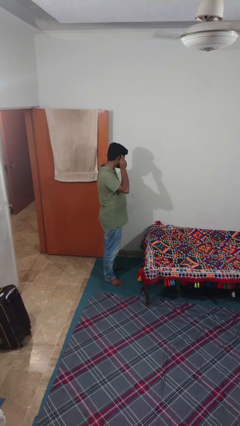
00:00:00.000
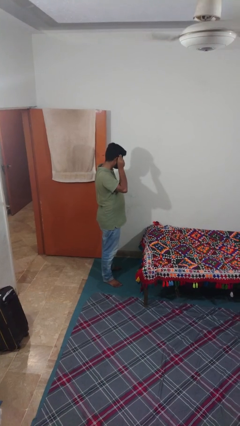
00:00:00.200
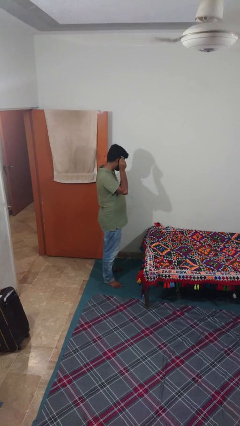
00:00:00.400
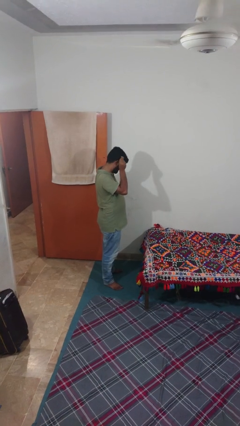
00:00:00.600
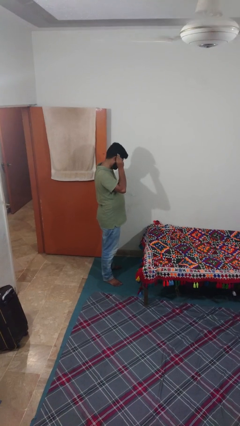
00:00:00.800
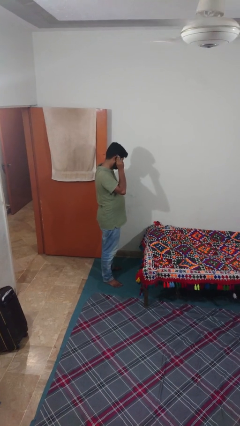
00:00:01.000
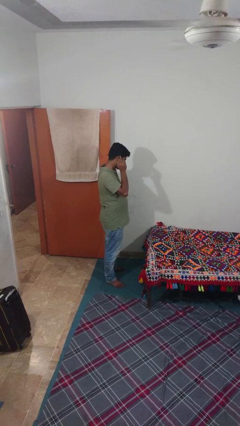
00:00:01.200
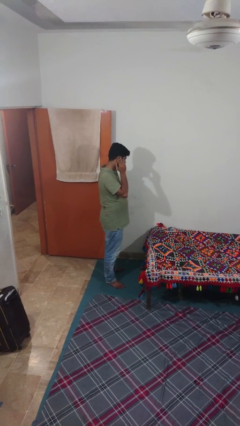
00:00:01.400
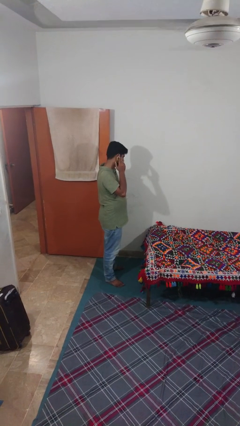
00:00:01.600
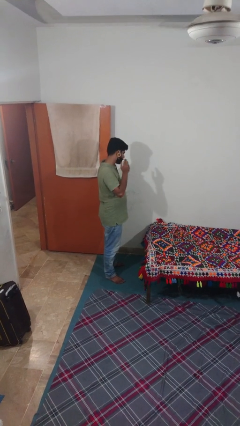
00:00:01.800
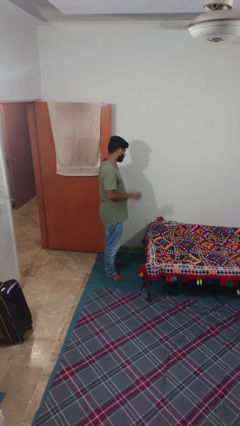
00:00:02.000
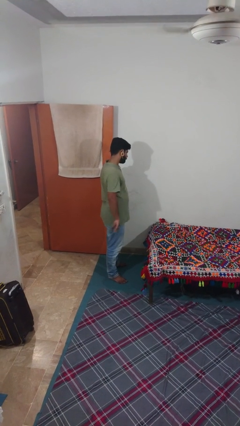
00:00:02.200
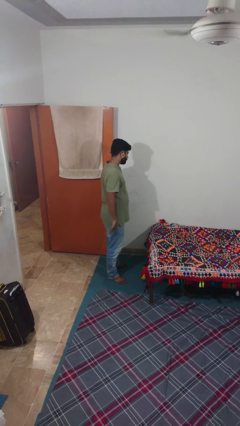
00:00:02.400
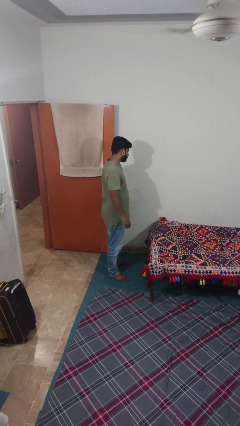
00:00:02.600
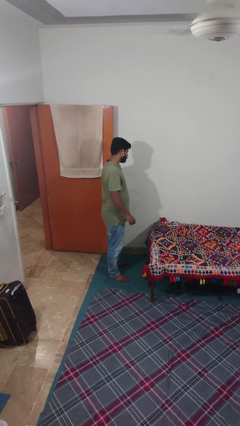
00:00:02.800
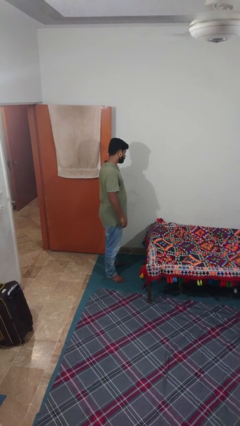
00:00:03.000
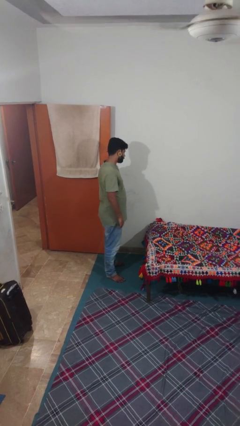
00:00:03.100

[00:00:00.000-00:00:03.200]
person puts on earrings

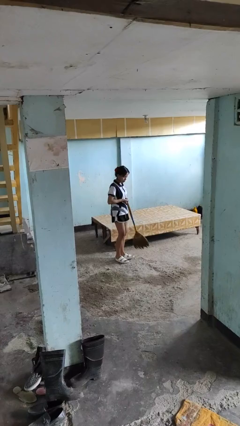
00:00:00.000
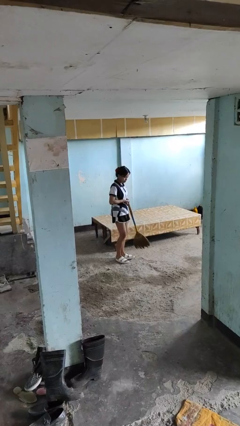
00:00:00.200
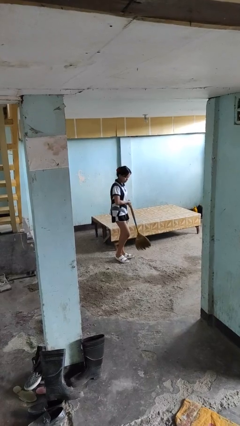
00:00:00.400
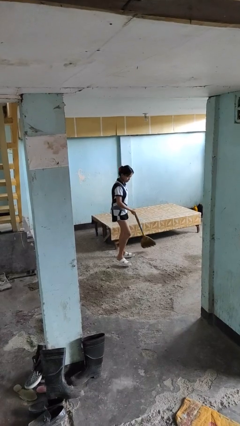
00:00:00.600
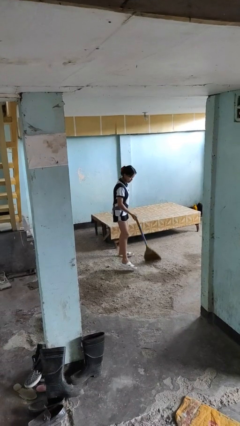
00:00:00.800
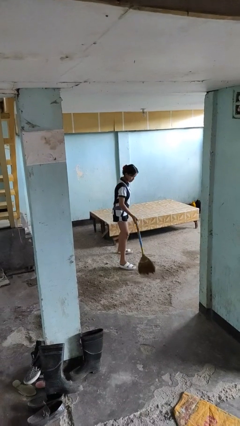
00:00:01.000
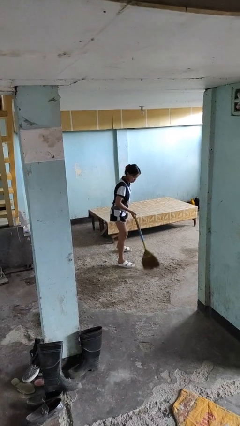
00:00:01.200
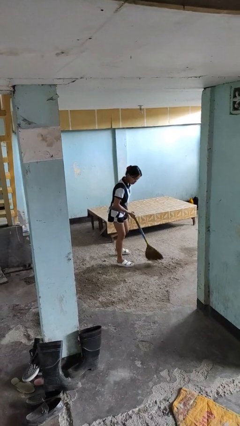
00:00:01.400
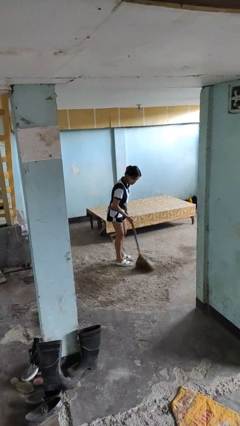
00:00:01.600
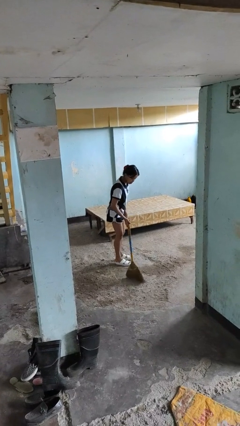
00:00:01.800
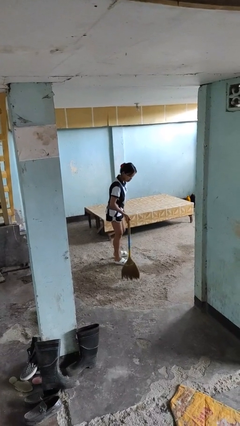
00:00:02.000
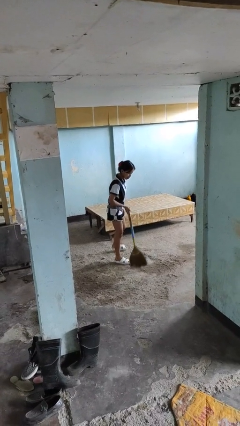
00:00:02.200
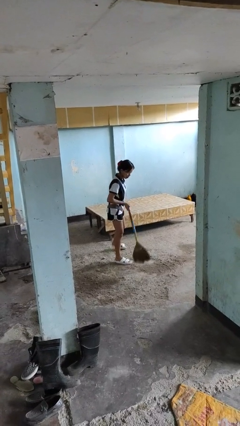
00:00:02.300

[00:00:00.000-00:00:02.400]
person sweeps floor

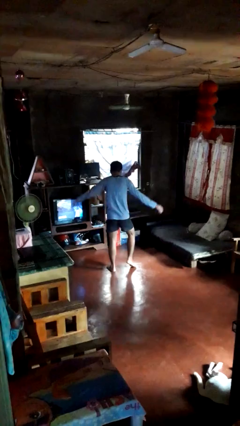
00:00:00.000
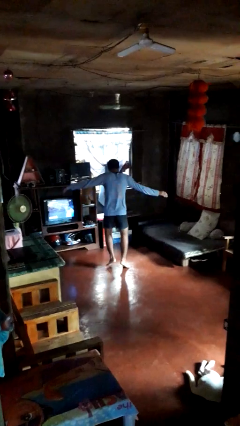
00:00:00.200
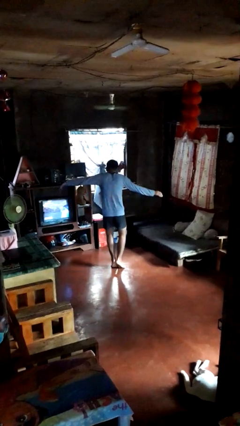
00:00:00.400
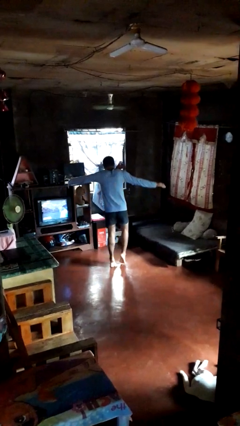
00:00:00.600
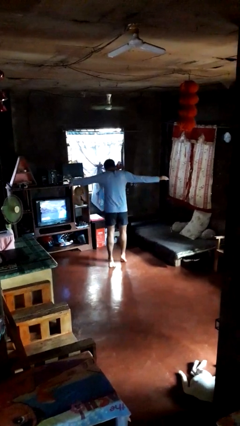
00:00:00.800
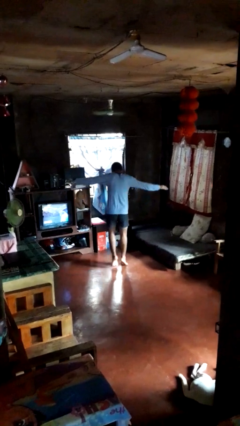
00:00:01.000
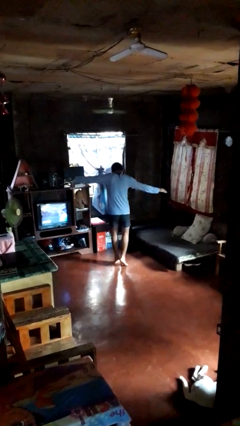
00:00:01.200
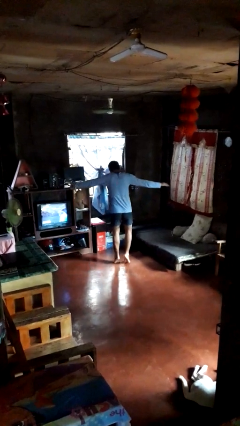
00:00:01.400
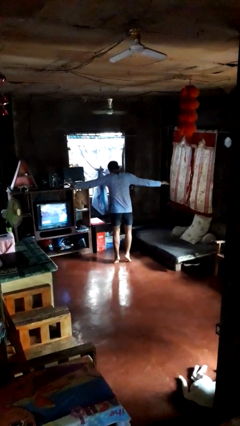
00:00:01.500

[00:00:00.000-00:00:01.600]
person walks tiptoe

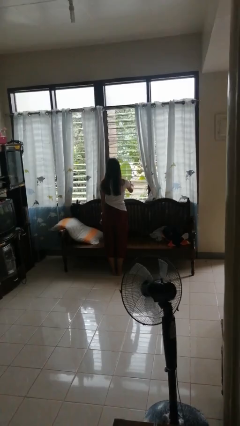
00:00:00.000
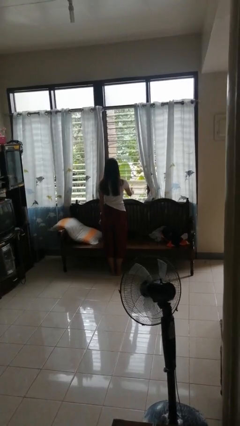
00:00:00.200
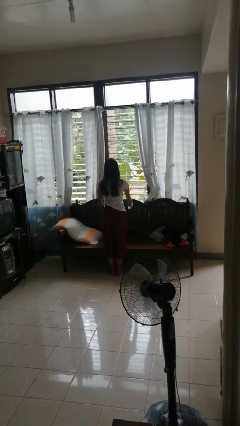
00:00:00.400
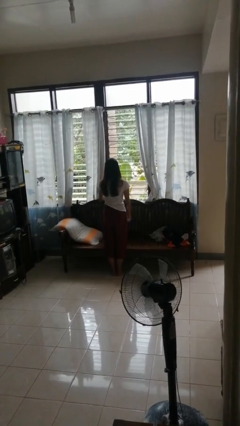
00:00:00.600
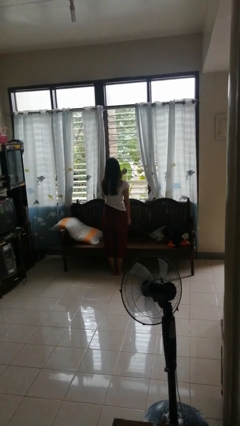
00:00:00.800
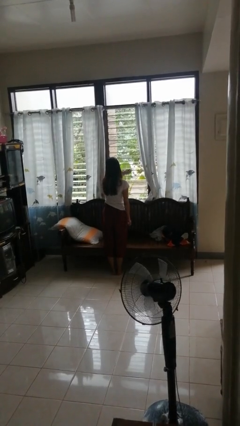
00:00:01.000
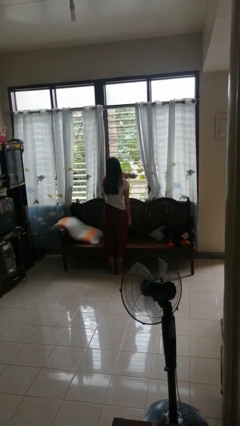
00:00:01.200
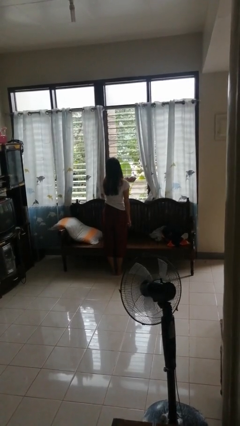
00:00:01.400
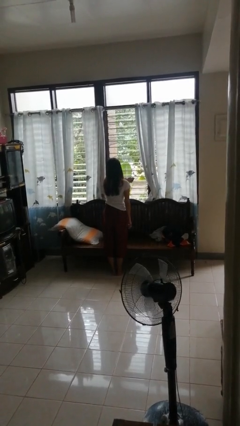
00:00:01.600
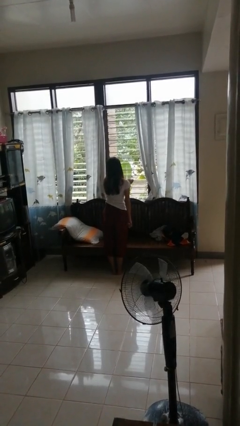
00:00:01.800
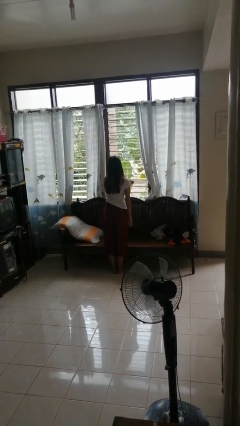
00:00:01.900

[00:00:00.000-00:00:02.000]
person washes window

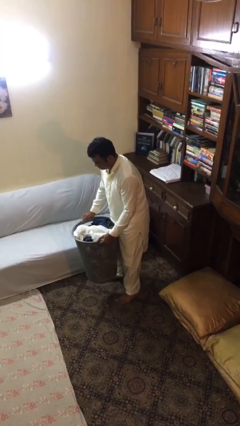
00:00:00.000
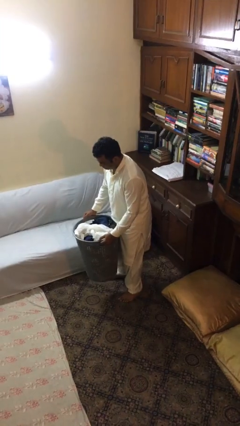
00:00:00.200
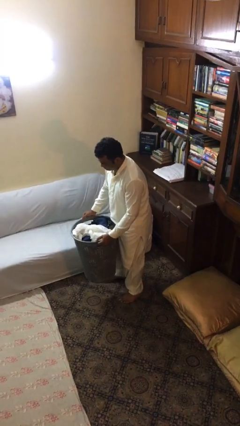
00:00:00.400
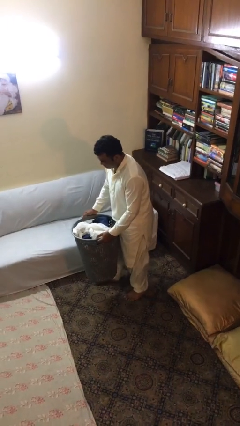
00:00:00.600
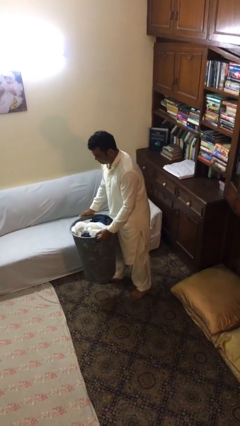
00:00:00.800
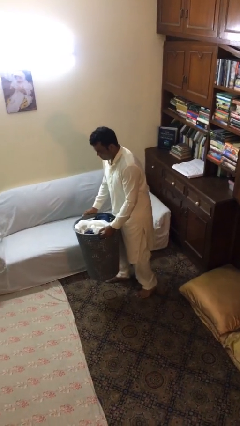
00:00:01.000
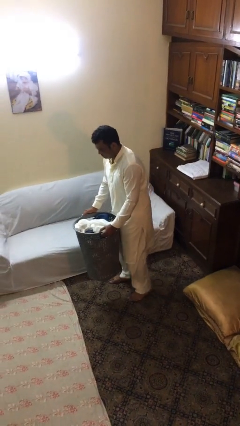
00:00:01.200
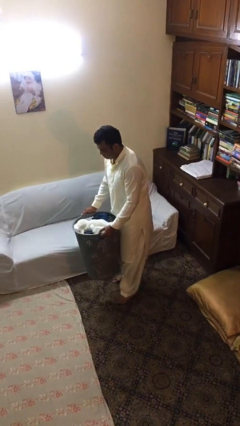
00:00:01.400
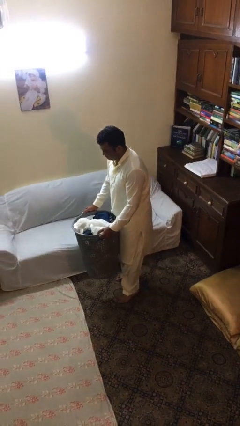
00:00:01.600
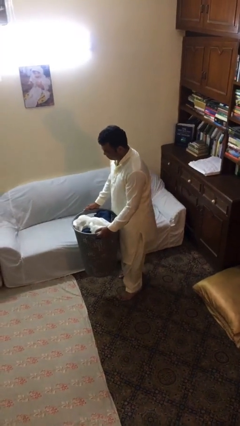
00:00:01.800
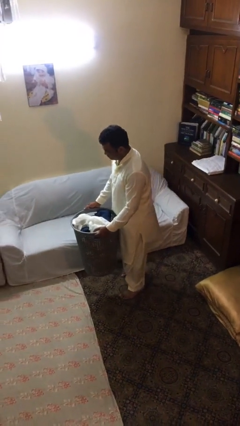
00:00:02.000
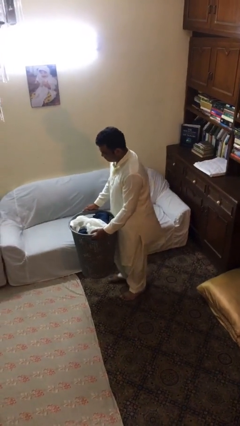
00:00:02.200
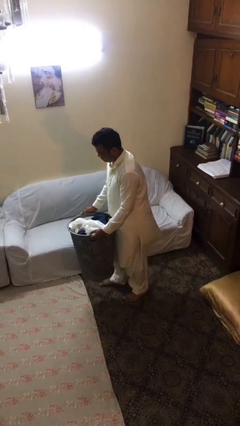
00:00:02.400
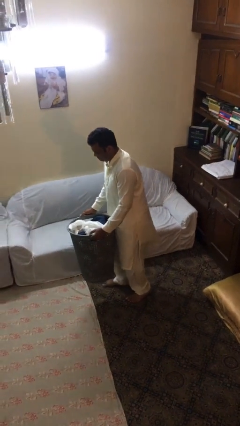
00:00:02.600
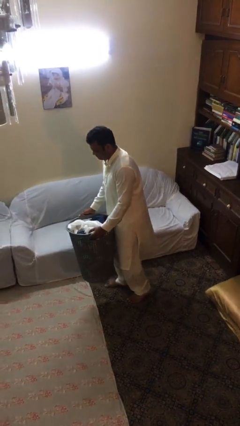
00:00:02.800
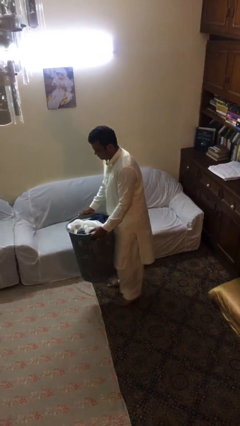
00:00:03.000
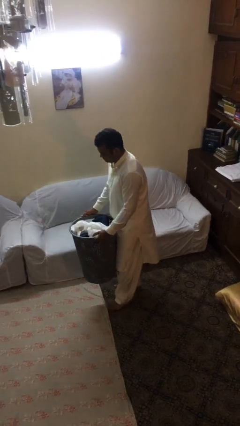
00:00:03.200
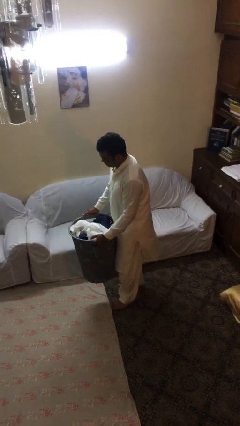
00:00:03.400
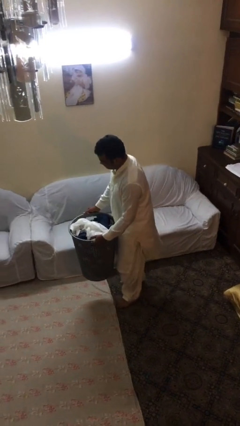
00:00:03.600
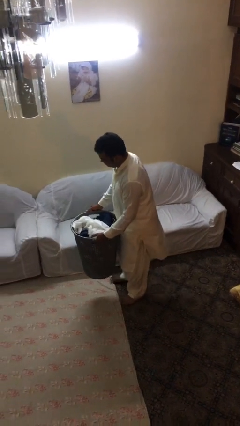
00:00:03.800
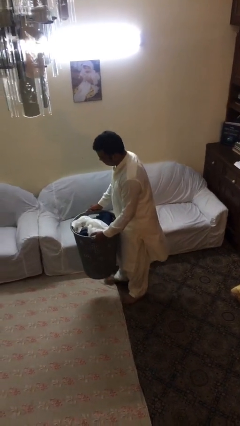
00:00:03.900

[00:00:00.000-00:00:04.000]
person carries heavy object

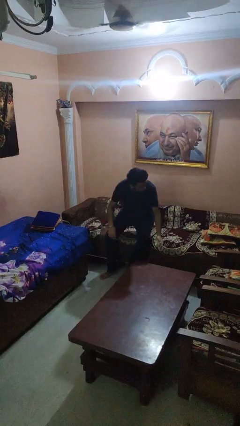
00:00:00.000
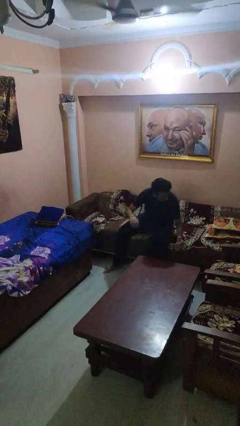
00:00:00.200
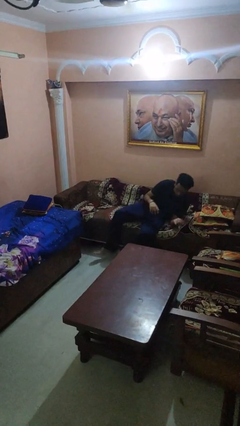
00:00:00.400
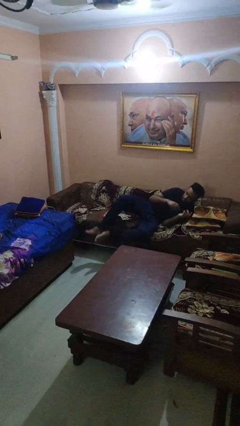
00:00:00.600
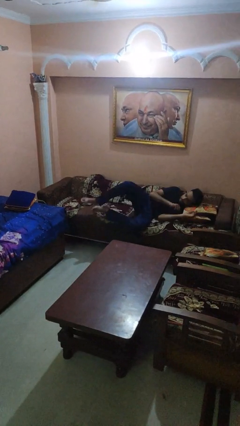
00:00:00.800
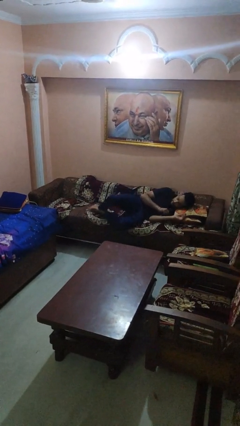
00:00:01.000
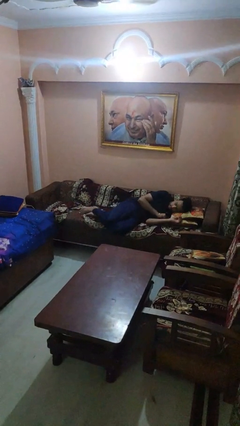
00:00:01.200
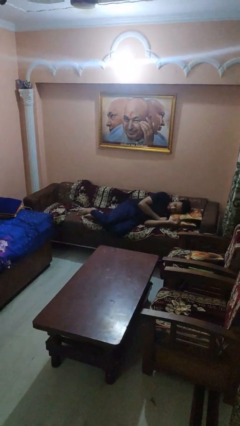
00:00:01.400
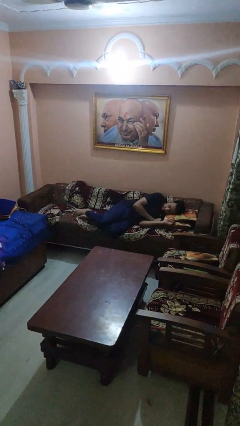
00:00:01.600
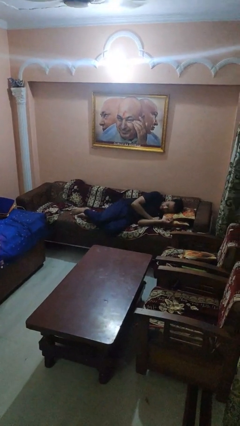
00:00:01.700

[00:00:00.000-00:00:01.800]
person lies down on couch

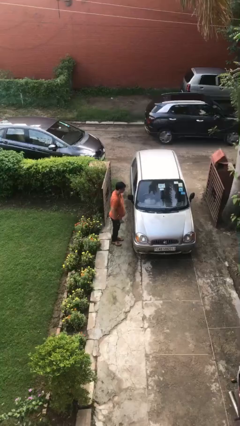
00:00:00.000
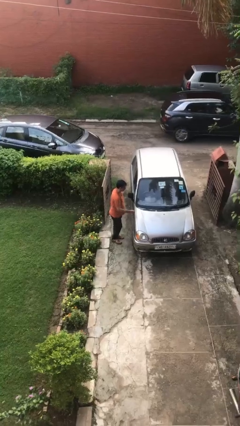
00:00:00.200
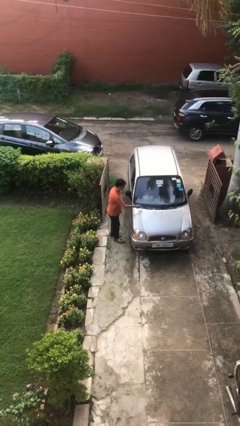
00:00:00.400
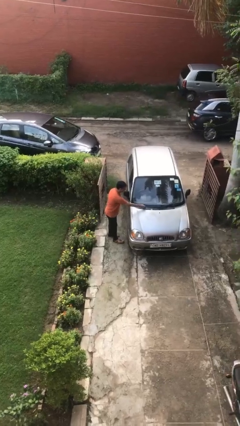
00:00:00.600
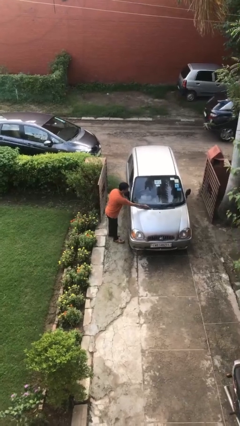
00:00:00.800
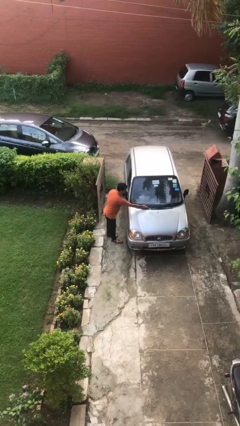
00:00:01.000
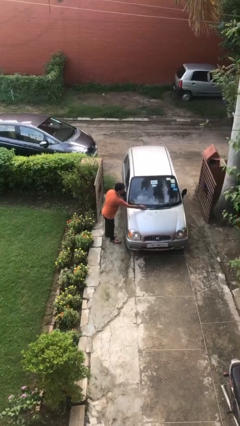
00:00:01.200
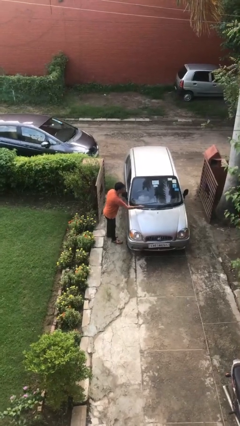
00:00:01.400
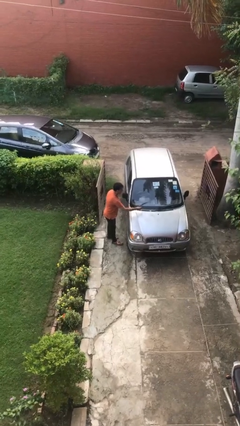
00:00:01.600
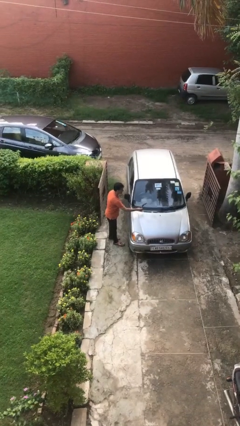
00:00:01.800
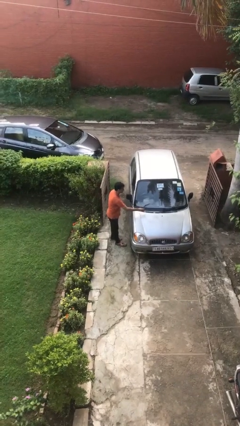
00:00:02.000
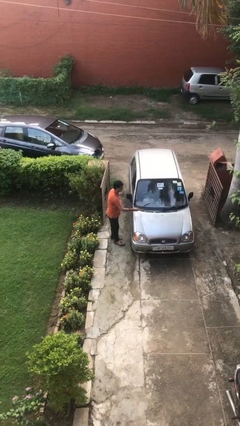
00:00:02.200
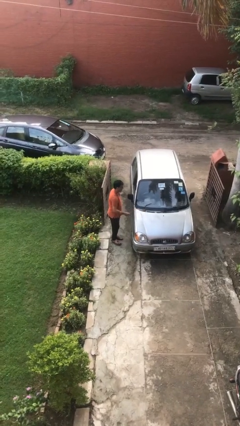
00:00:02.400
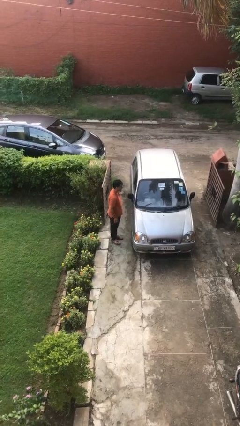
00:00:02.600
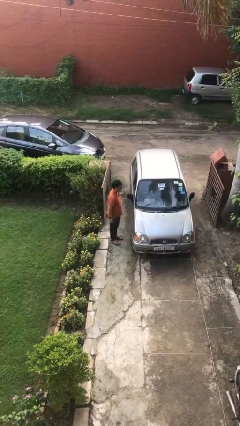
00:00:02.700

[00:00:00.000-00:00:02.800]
person flips up car wipers
